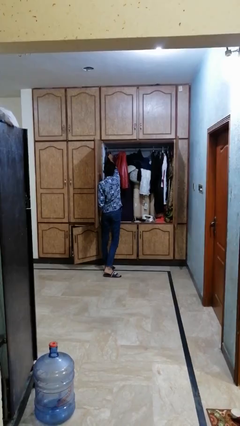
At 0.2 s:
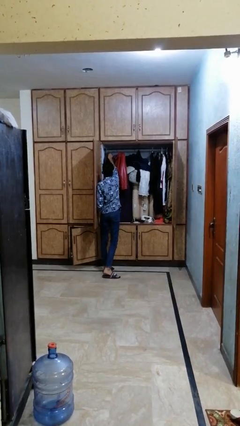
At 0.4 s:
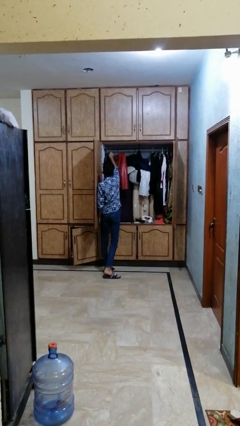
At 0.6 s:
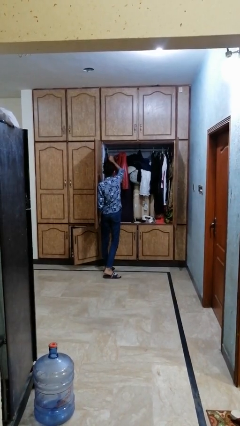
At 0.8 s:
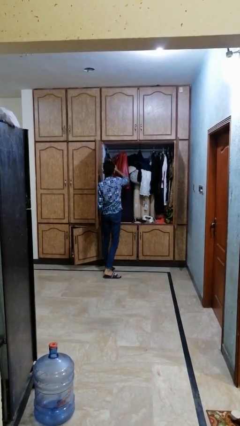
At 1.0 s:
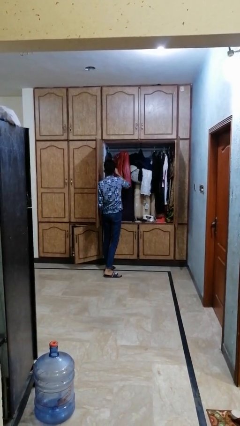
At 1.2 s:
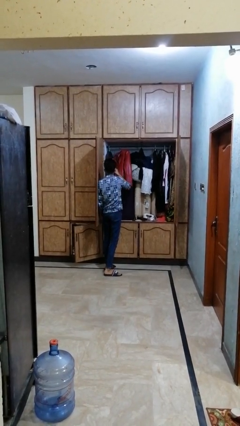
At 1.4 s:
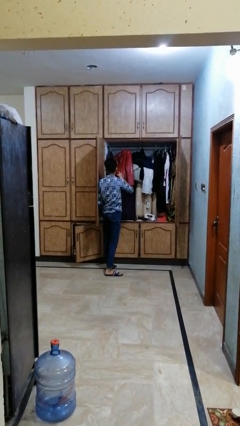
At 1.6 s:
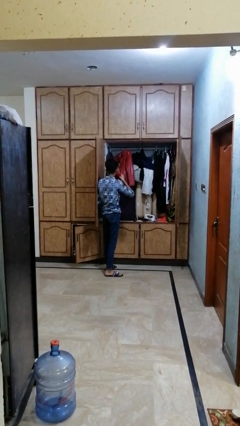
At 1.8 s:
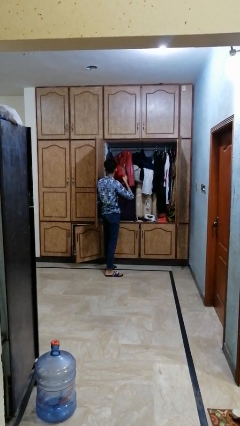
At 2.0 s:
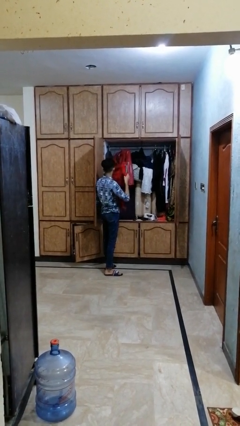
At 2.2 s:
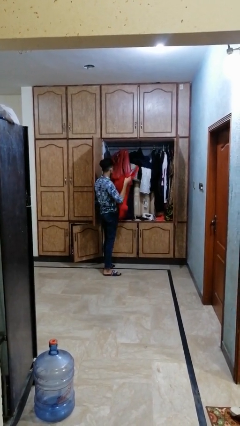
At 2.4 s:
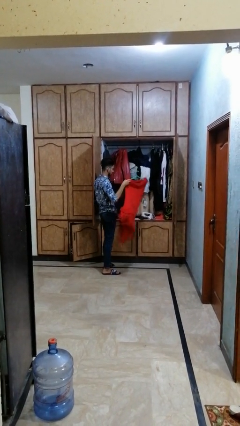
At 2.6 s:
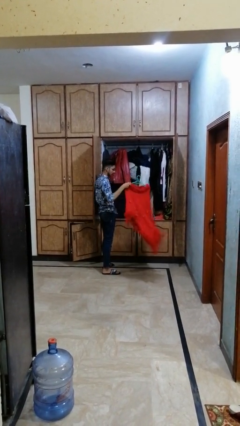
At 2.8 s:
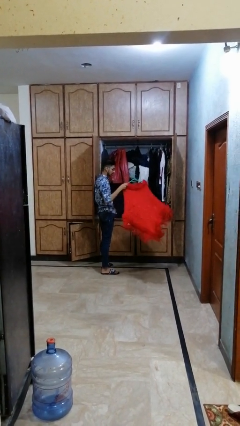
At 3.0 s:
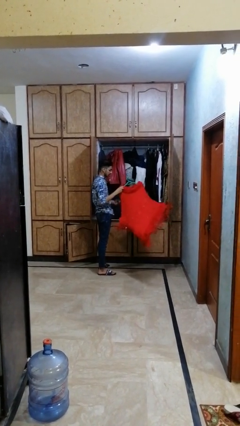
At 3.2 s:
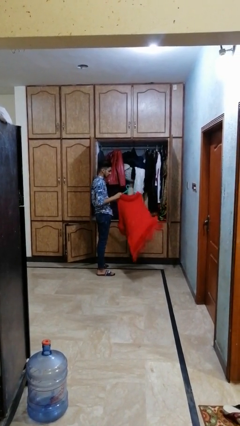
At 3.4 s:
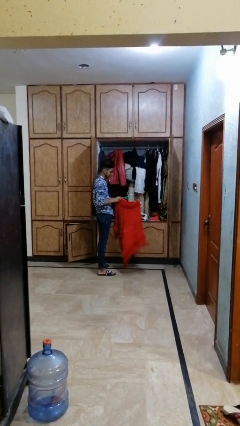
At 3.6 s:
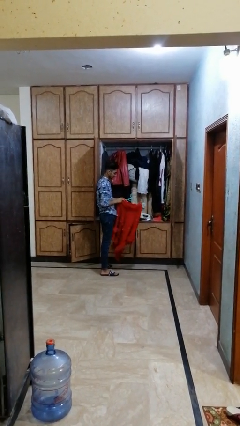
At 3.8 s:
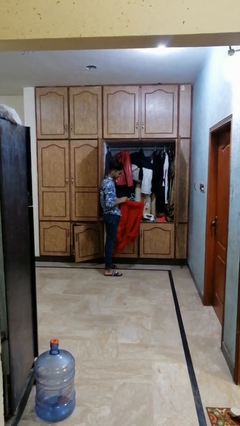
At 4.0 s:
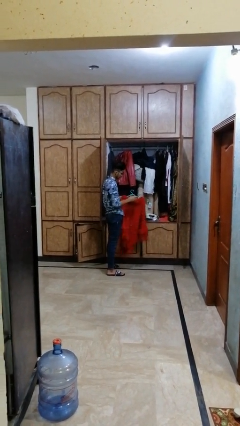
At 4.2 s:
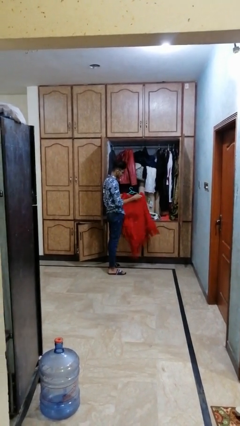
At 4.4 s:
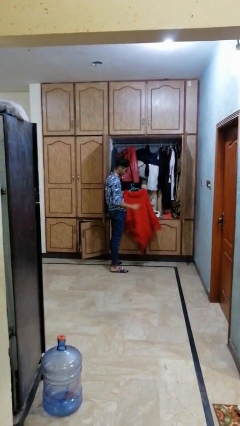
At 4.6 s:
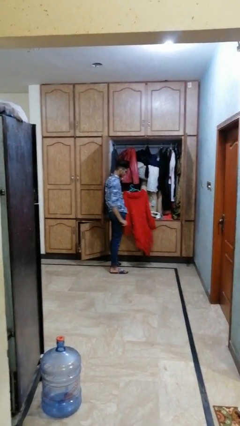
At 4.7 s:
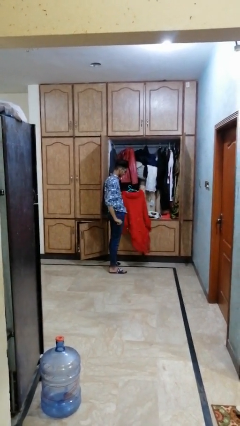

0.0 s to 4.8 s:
person takes clothes from dresser

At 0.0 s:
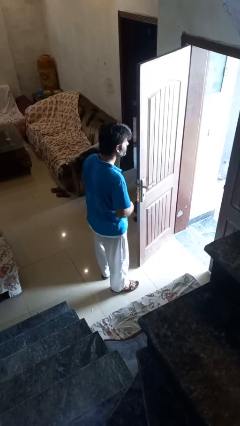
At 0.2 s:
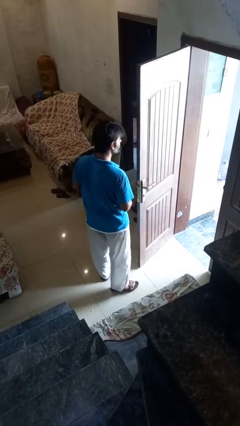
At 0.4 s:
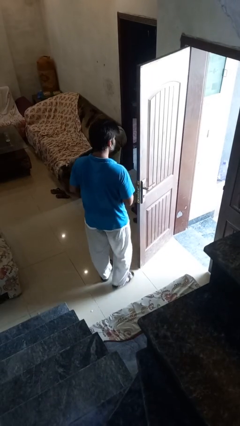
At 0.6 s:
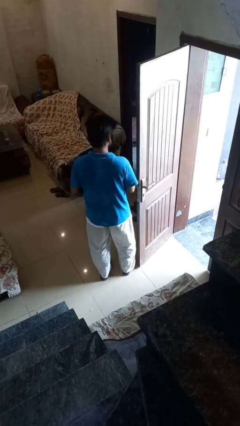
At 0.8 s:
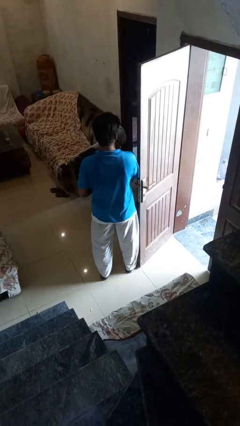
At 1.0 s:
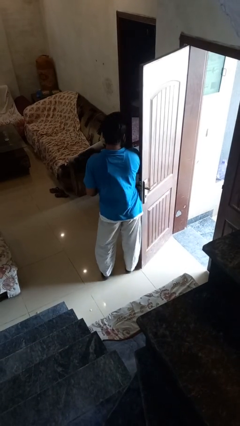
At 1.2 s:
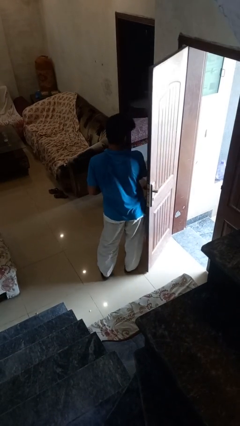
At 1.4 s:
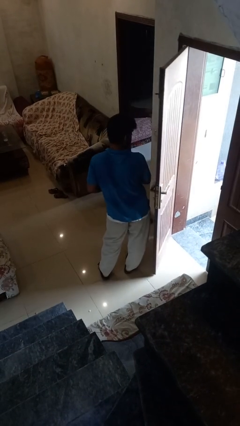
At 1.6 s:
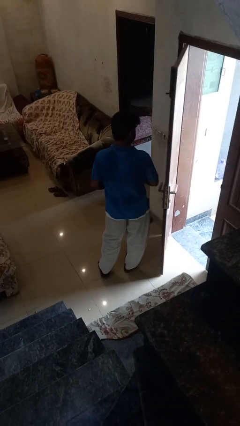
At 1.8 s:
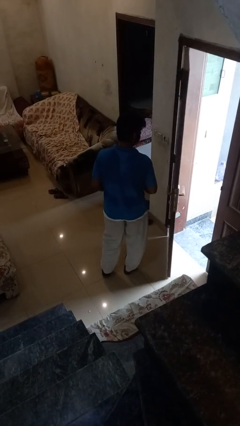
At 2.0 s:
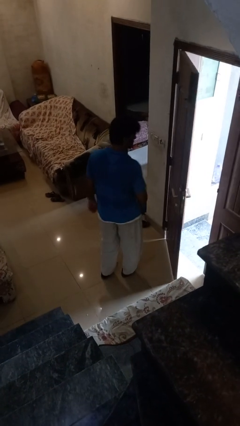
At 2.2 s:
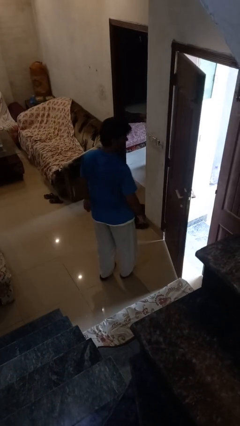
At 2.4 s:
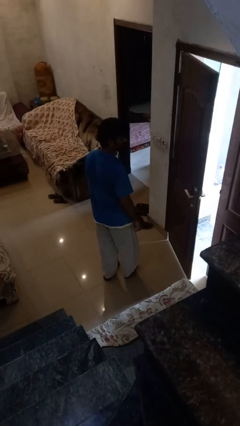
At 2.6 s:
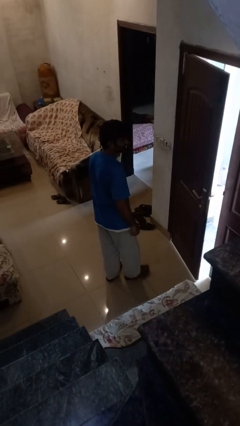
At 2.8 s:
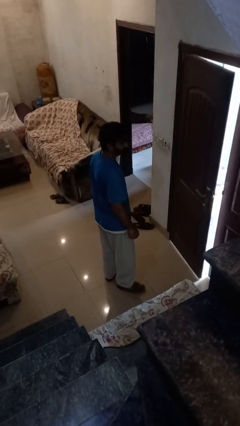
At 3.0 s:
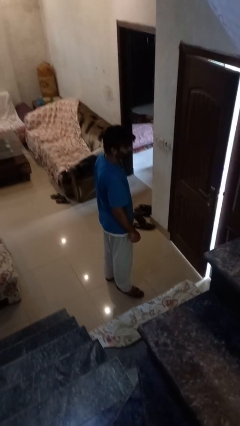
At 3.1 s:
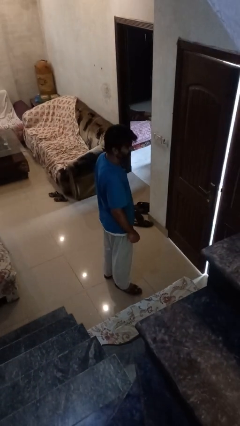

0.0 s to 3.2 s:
person closes door with hip

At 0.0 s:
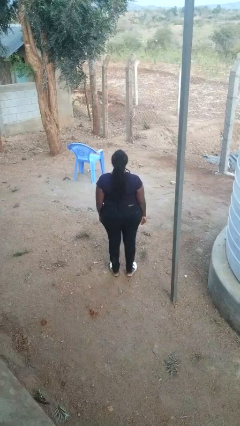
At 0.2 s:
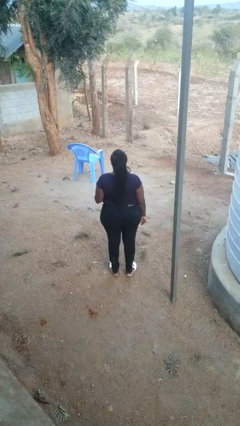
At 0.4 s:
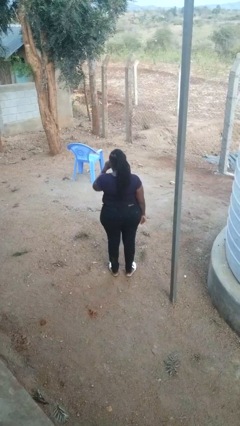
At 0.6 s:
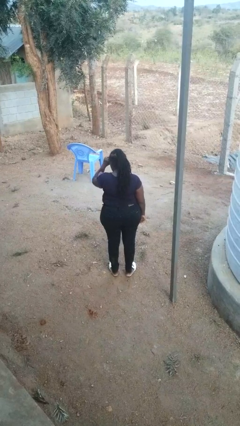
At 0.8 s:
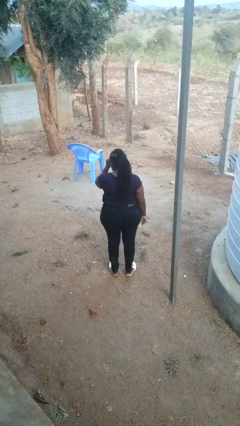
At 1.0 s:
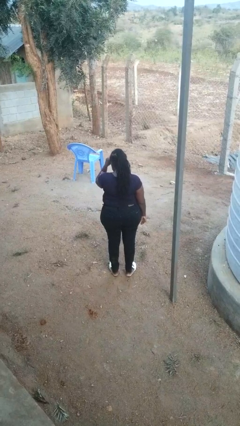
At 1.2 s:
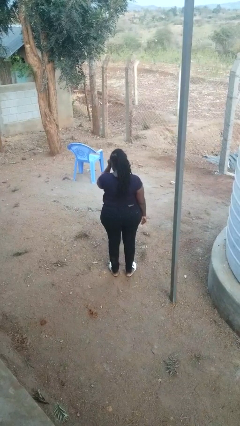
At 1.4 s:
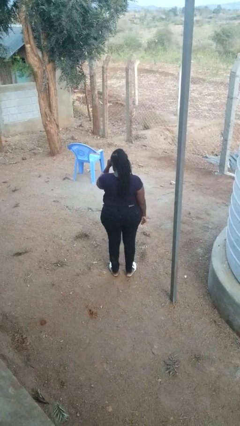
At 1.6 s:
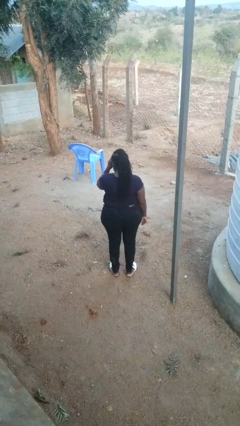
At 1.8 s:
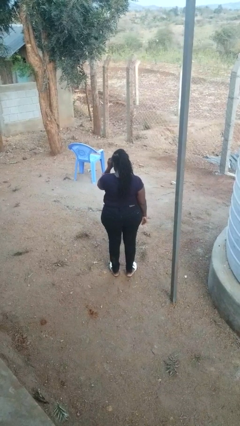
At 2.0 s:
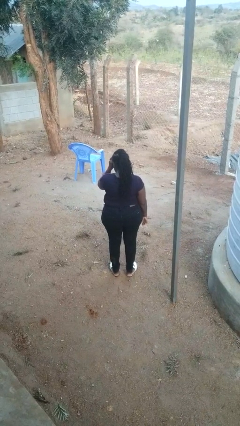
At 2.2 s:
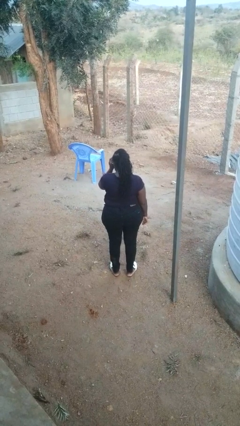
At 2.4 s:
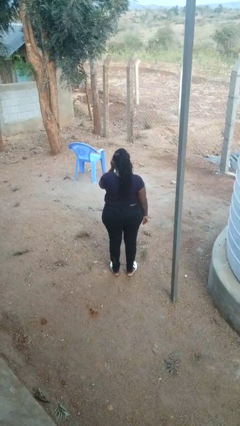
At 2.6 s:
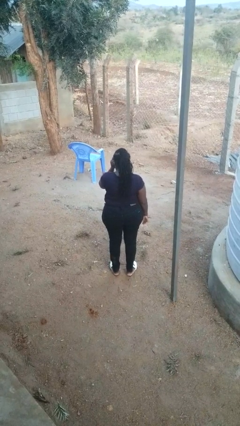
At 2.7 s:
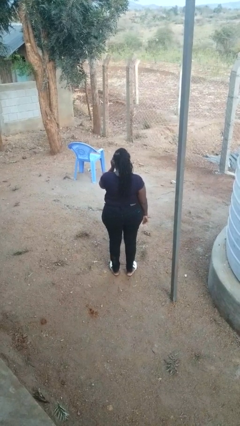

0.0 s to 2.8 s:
person rubs eyes

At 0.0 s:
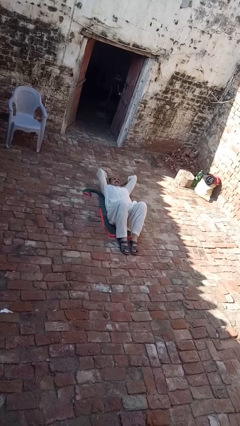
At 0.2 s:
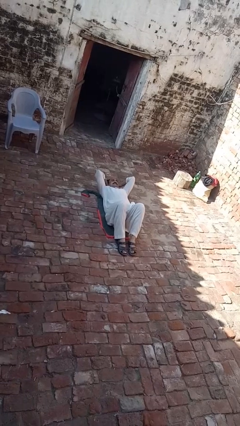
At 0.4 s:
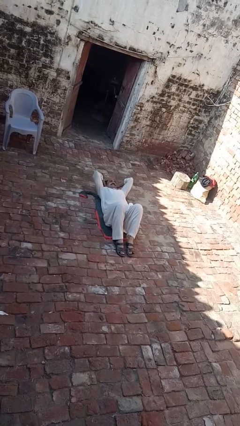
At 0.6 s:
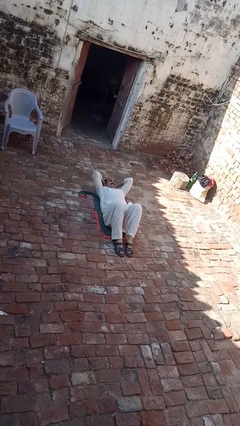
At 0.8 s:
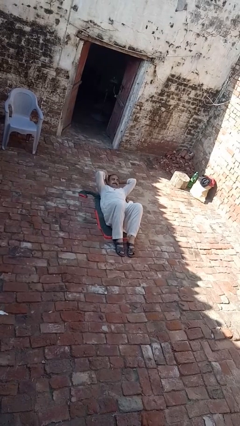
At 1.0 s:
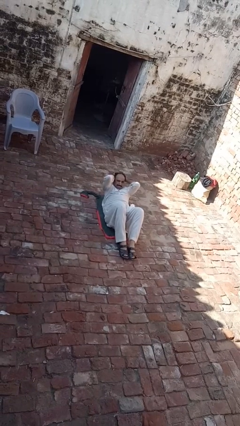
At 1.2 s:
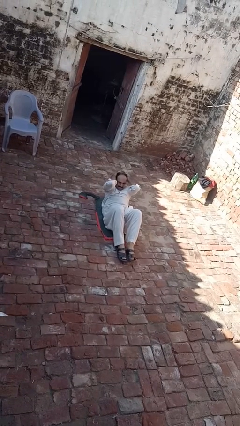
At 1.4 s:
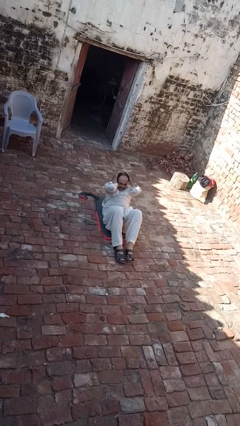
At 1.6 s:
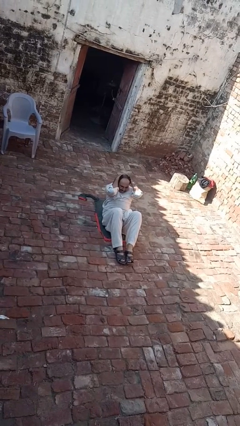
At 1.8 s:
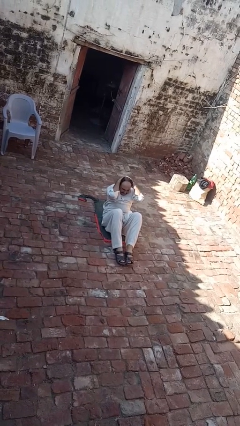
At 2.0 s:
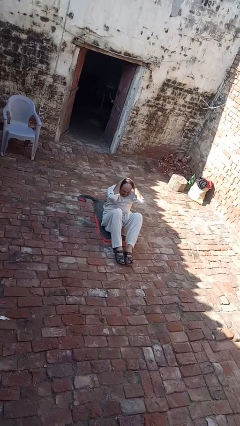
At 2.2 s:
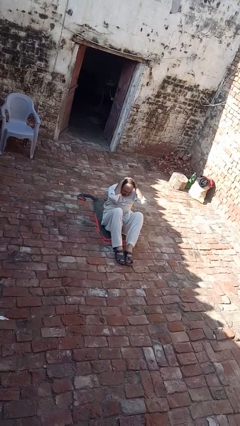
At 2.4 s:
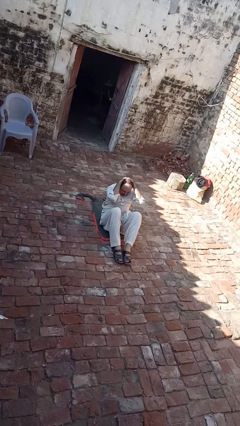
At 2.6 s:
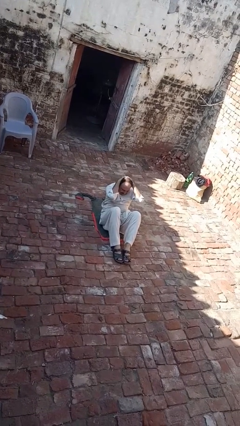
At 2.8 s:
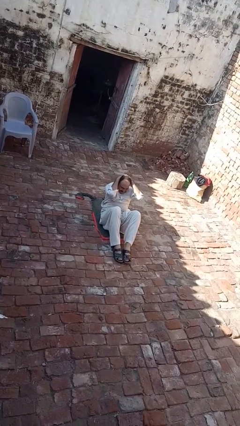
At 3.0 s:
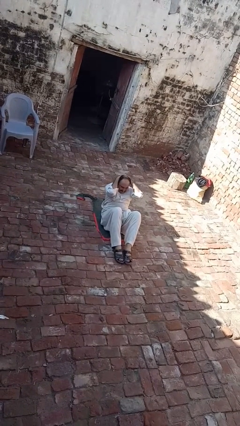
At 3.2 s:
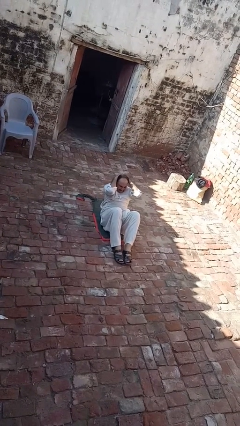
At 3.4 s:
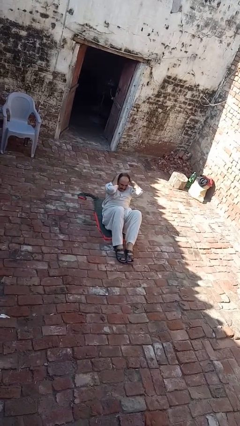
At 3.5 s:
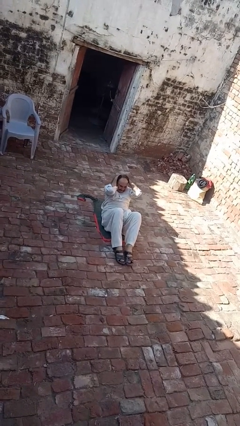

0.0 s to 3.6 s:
person exercises with situp

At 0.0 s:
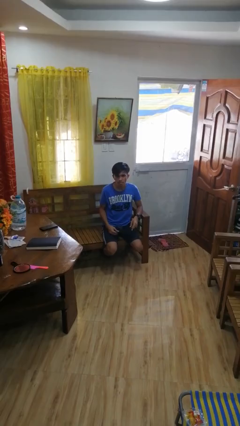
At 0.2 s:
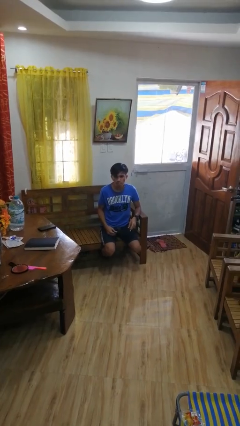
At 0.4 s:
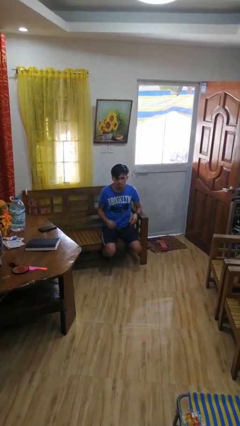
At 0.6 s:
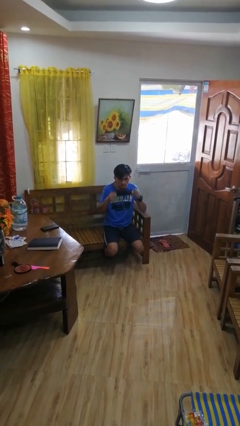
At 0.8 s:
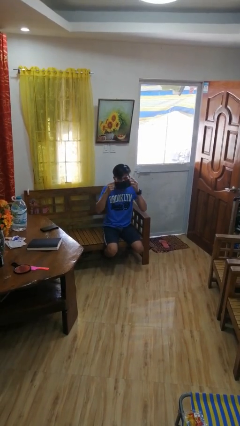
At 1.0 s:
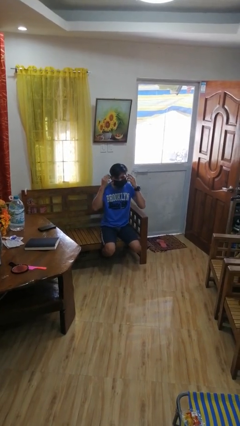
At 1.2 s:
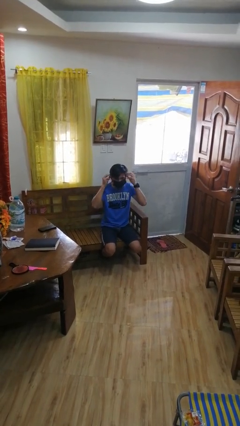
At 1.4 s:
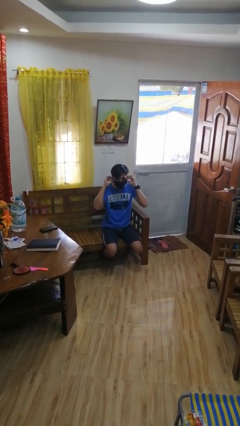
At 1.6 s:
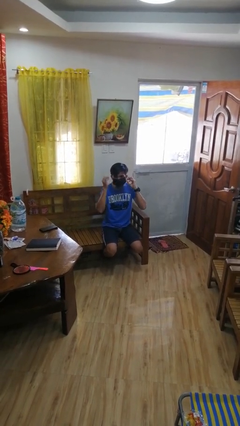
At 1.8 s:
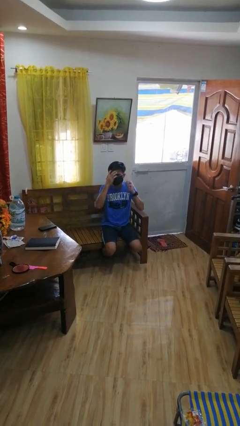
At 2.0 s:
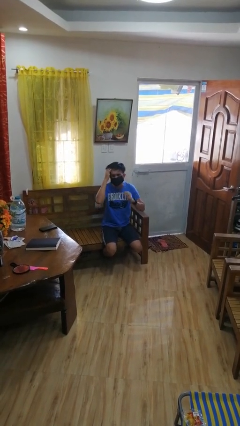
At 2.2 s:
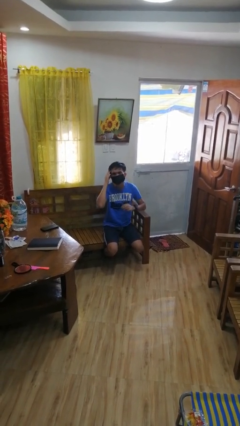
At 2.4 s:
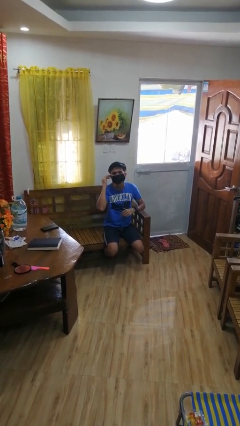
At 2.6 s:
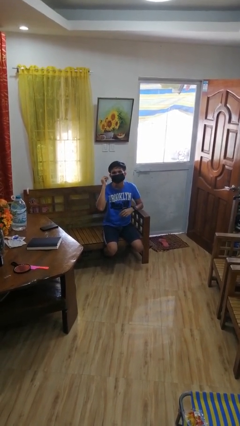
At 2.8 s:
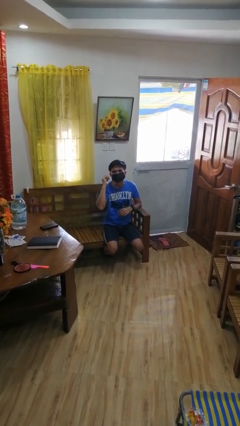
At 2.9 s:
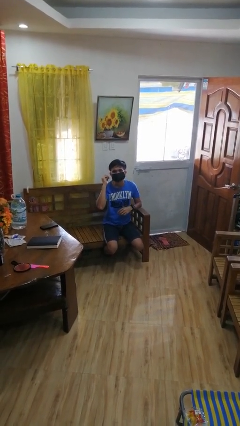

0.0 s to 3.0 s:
person puts on facemask
